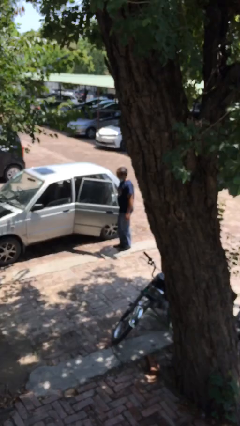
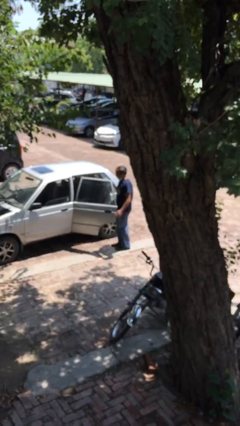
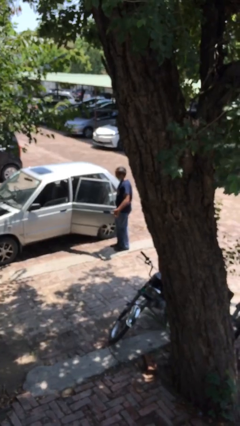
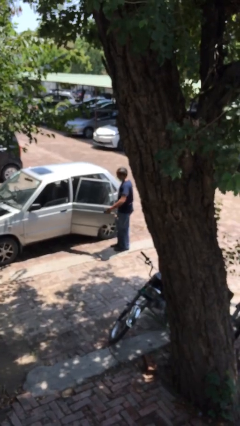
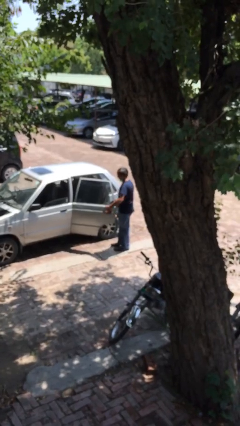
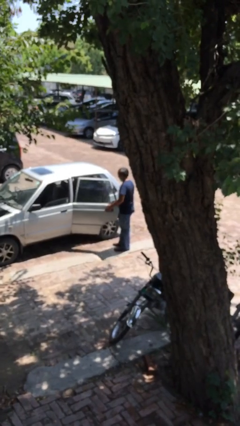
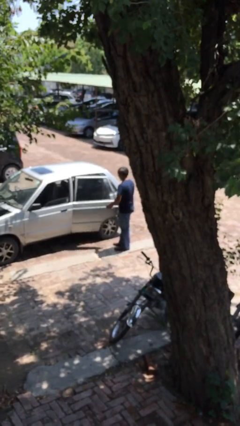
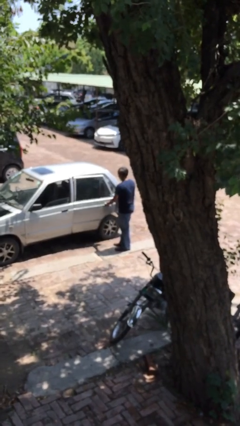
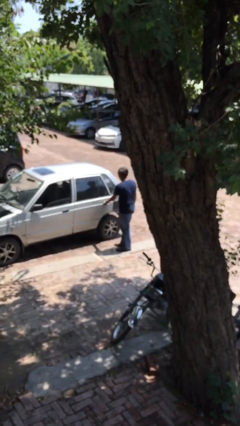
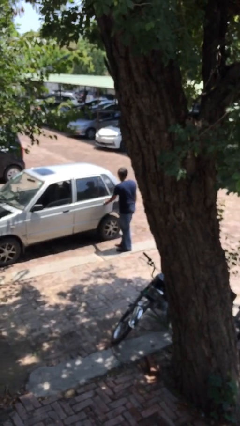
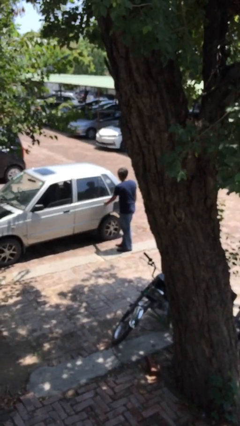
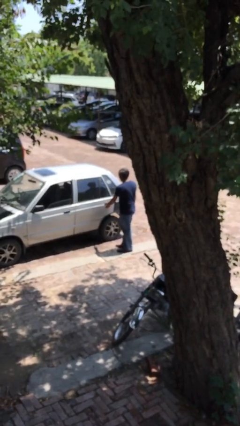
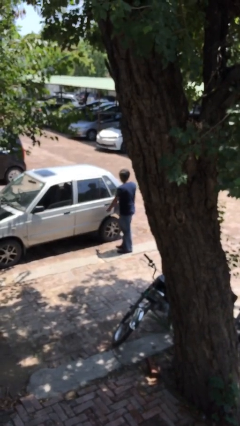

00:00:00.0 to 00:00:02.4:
person closes car door

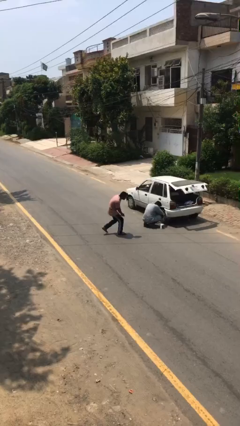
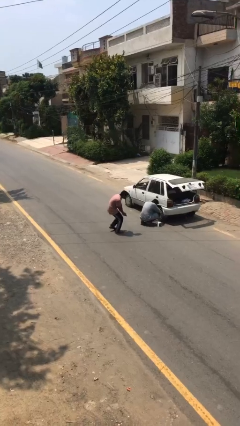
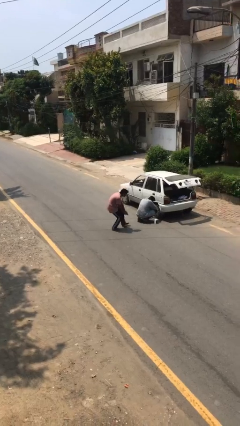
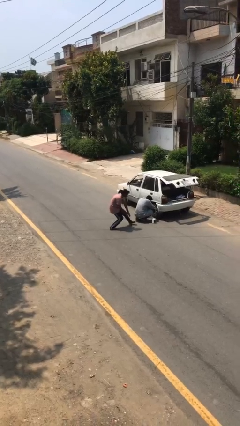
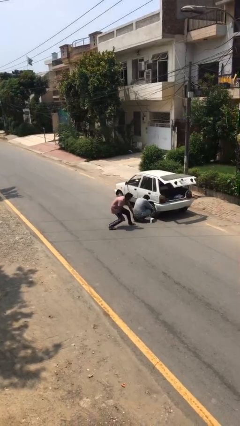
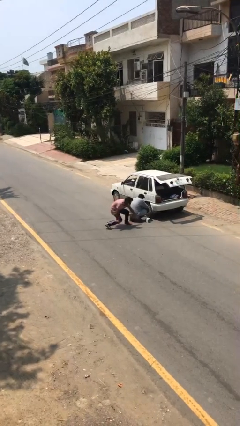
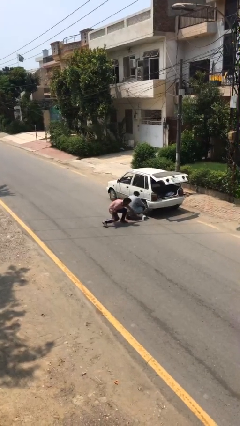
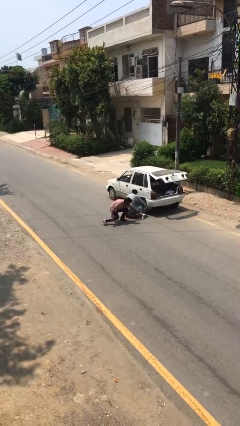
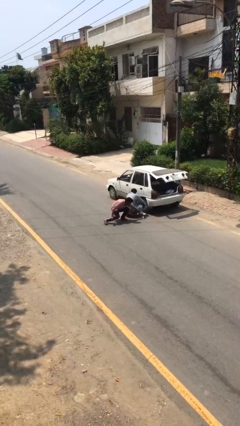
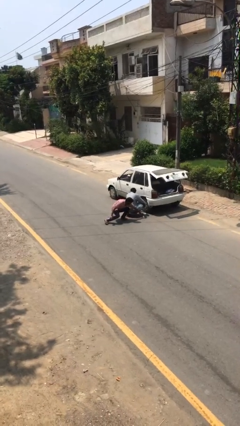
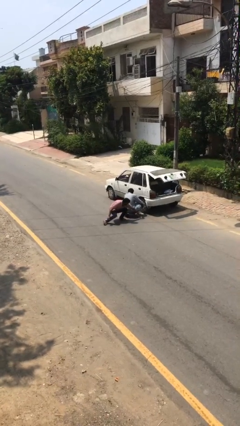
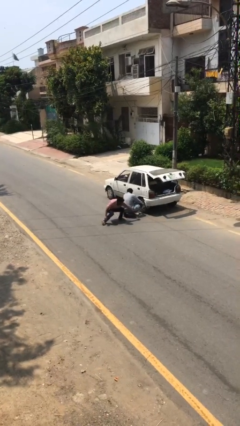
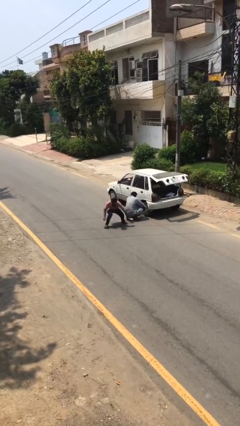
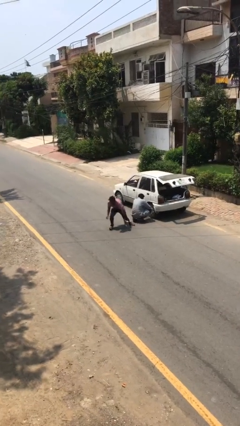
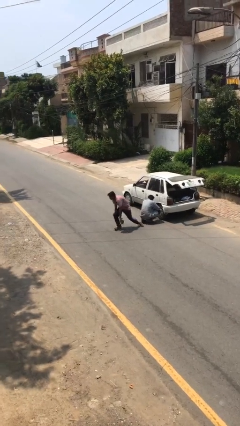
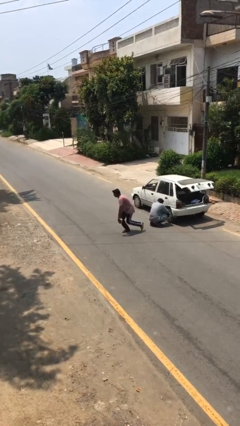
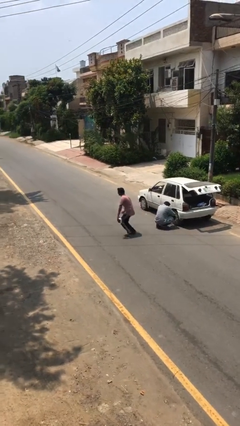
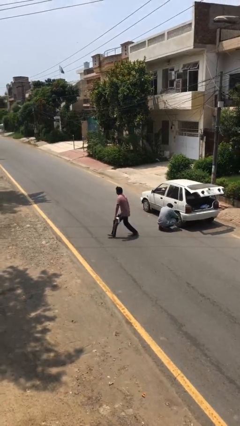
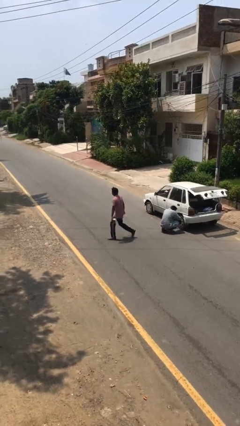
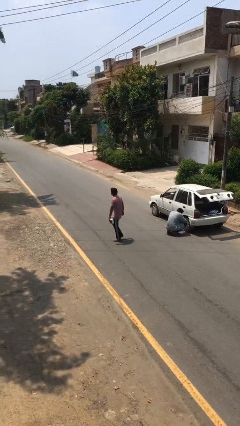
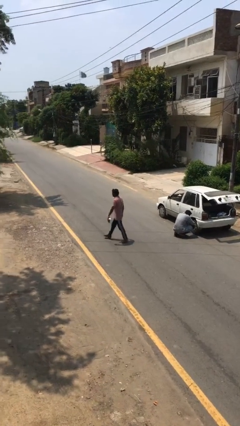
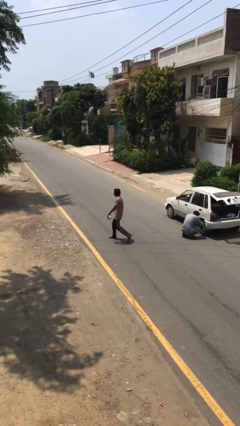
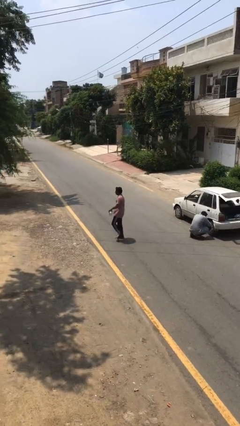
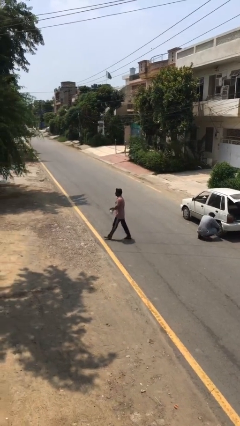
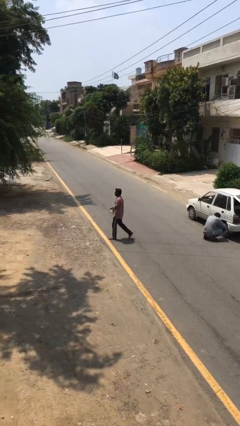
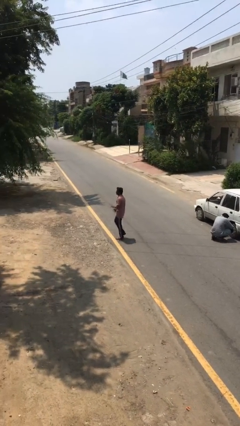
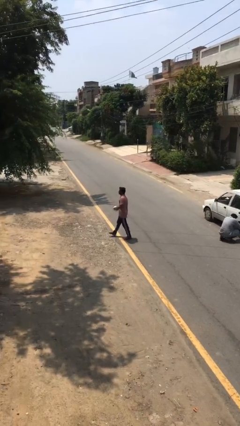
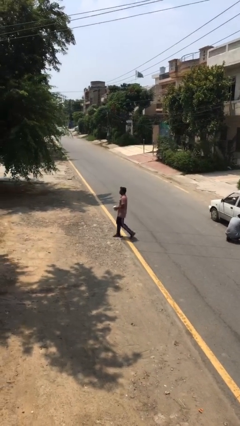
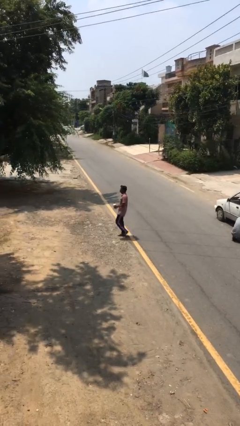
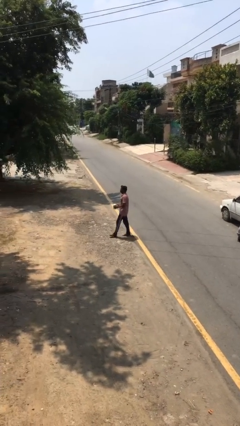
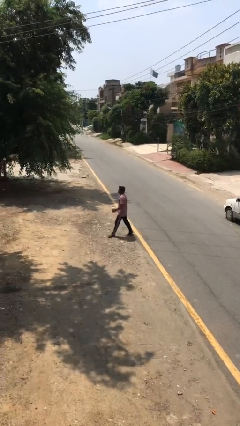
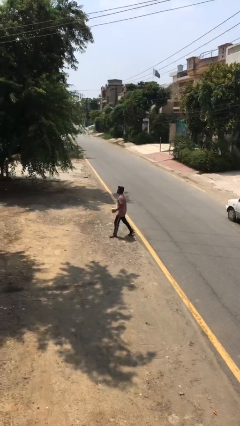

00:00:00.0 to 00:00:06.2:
person steals object from person

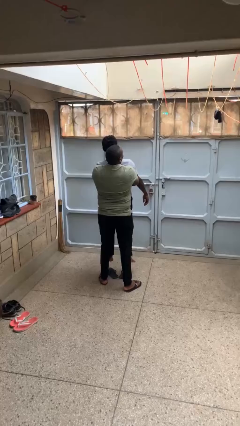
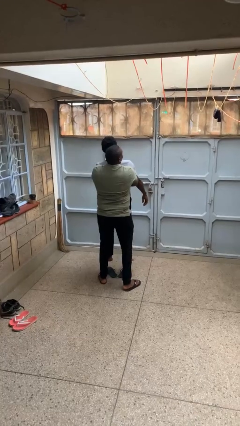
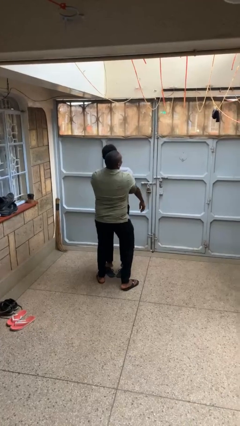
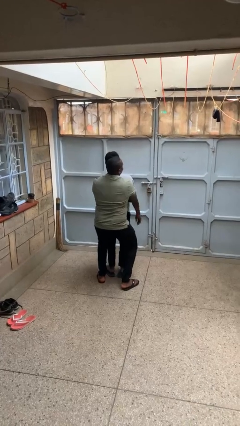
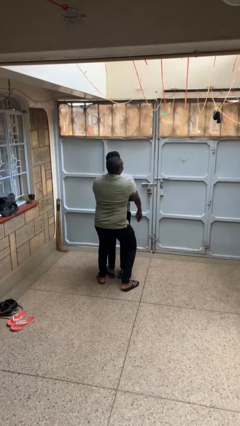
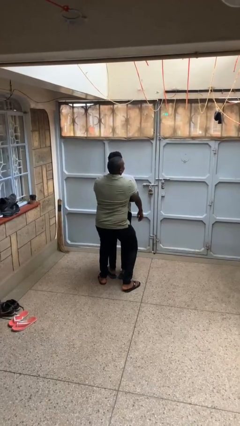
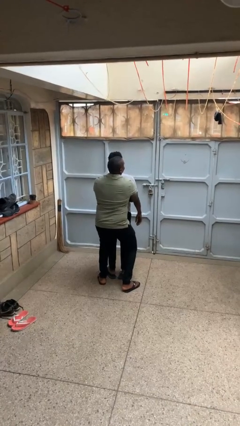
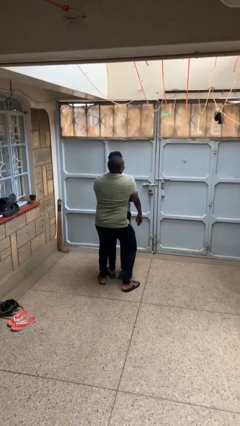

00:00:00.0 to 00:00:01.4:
person puts down person

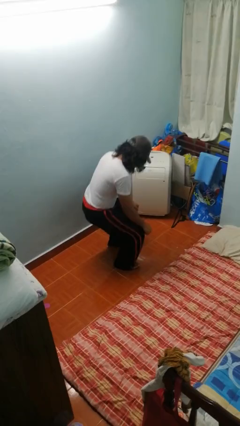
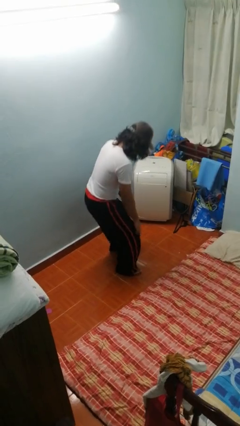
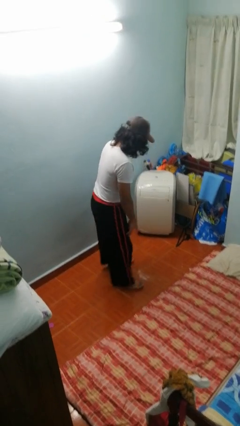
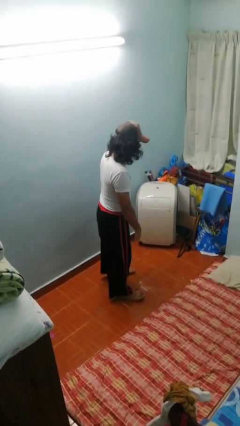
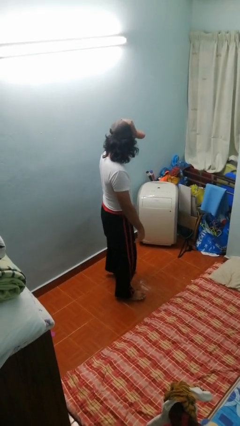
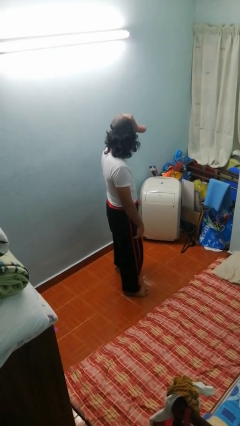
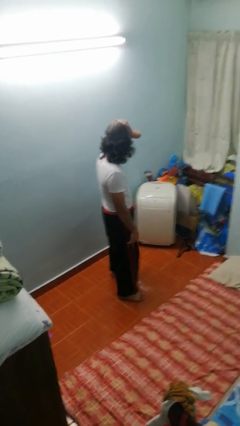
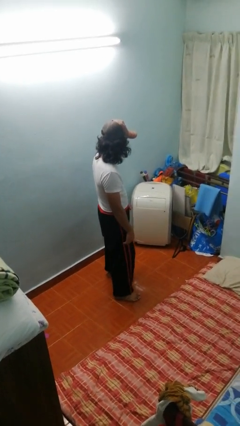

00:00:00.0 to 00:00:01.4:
person stands up

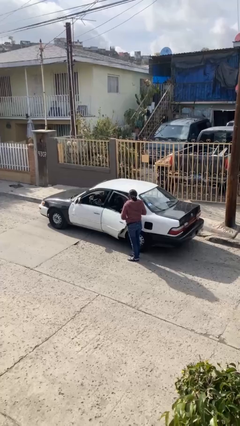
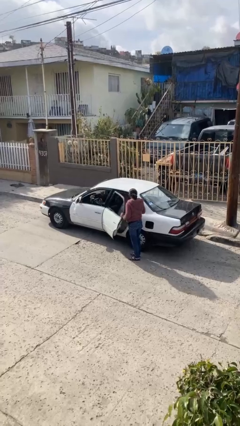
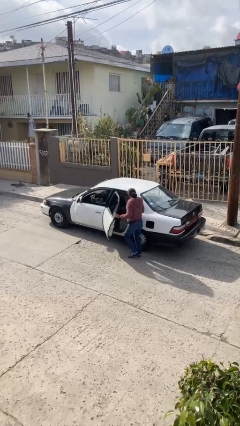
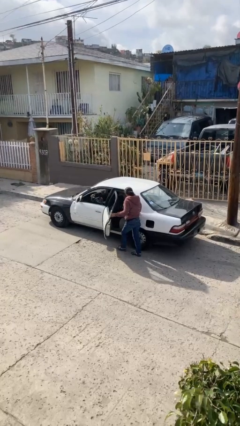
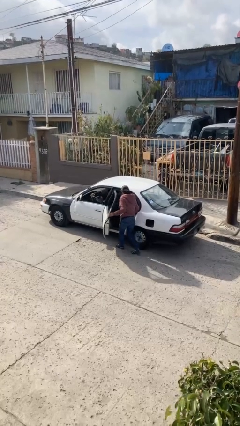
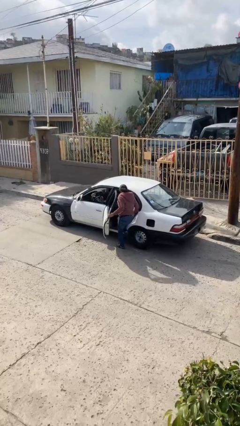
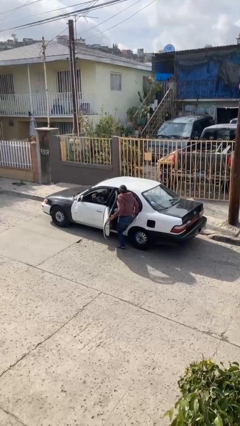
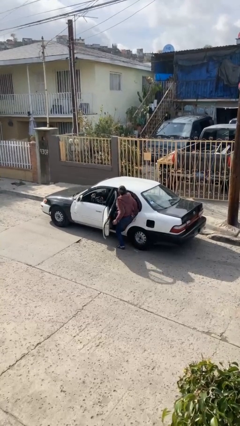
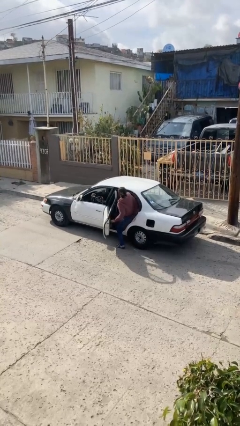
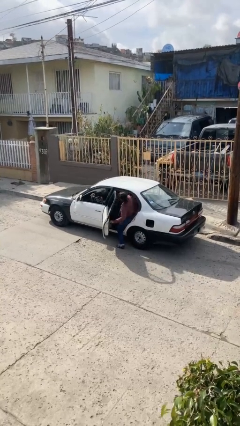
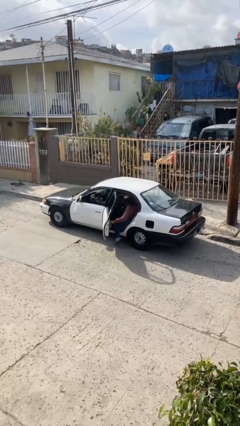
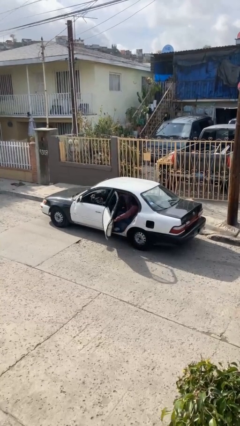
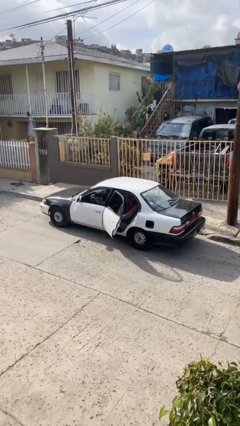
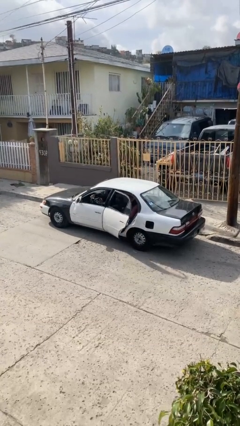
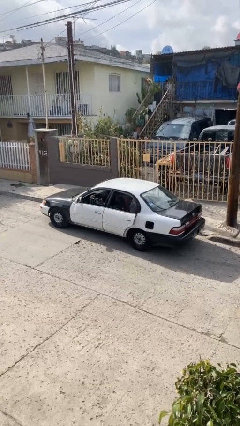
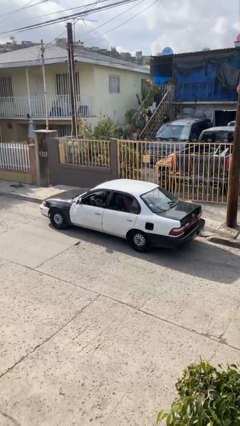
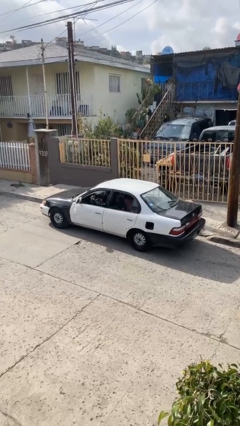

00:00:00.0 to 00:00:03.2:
car picks up person

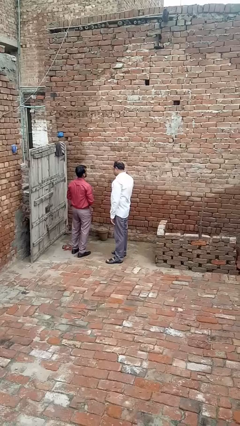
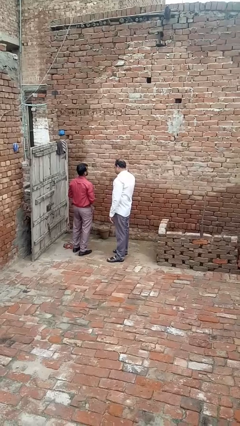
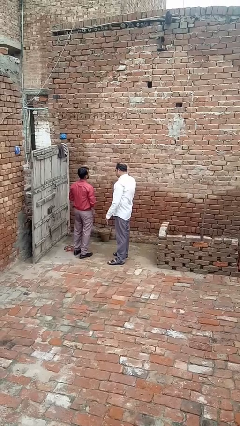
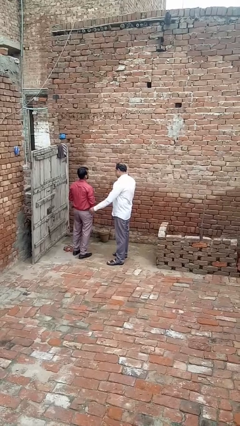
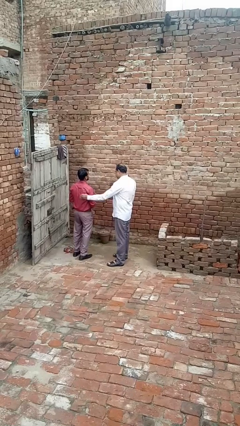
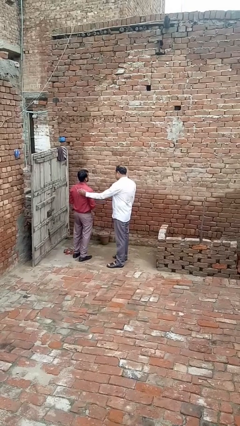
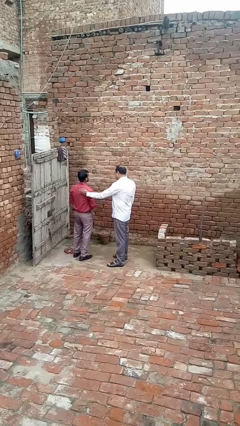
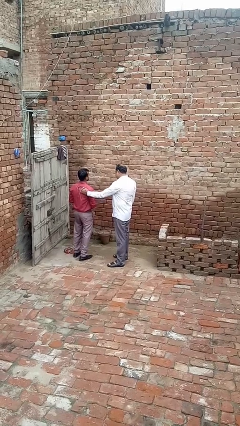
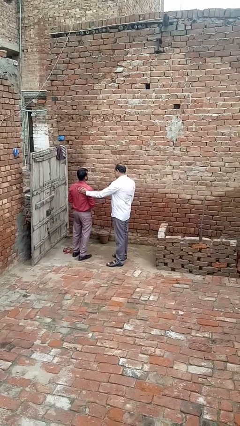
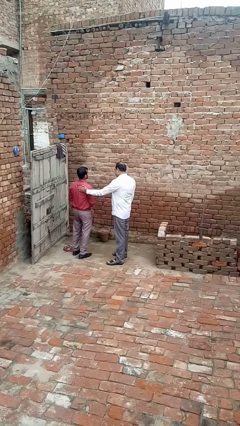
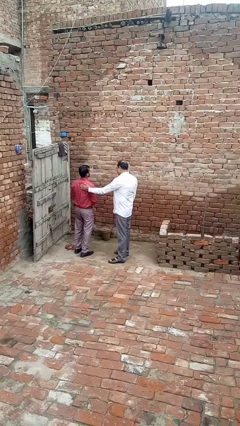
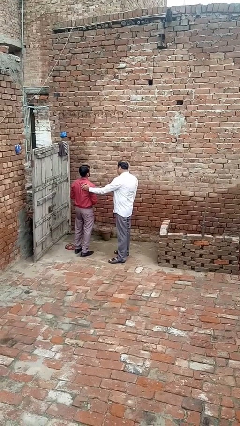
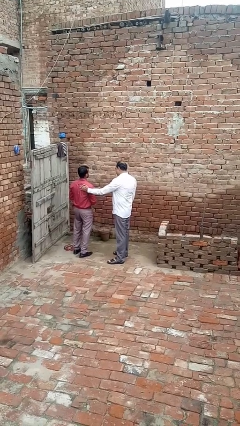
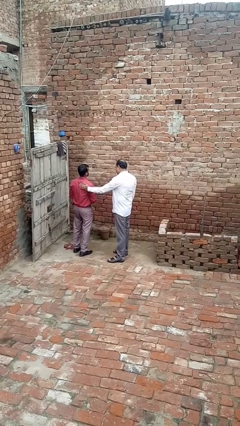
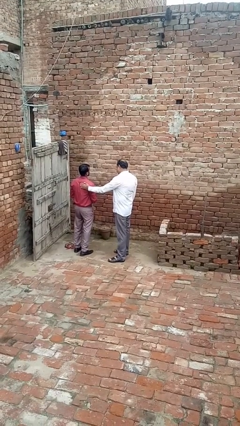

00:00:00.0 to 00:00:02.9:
person touches back of person
